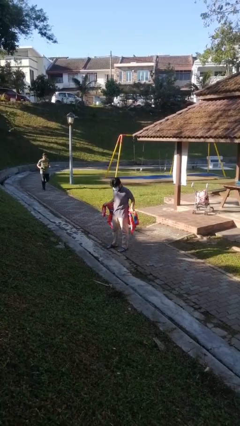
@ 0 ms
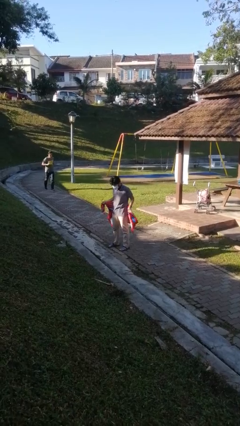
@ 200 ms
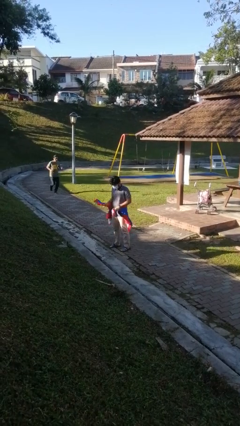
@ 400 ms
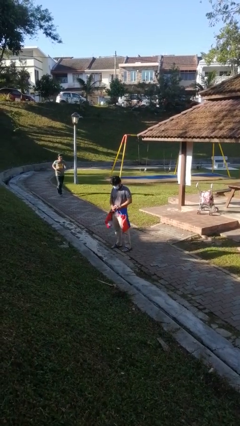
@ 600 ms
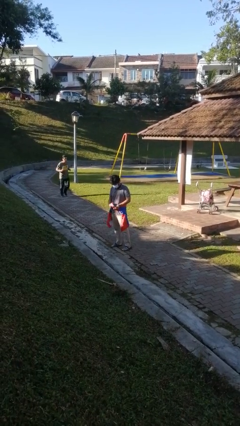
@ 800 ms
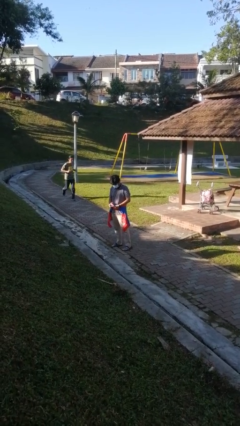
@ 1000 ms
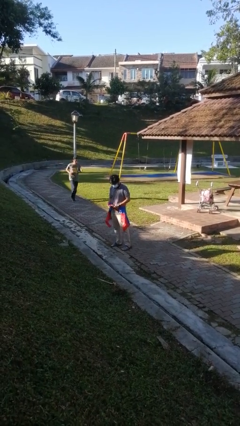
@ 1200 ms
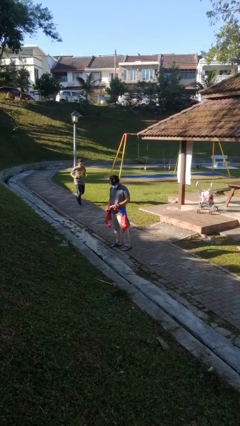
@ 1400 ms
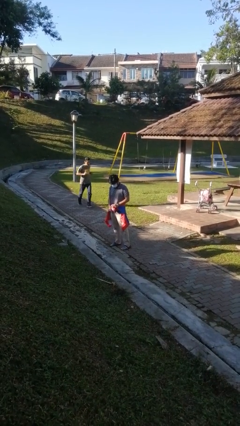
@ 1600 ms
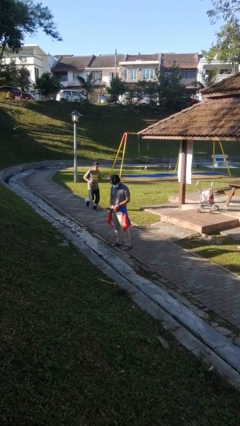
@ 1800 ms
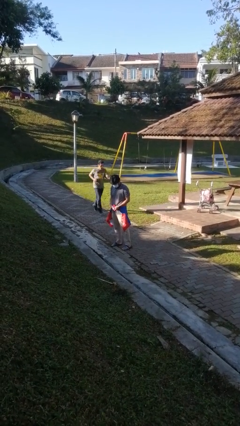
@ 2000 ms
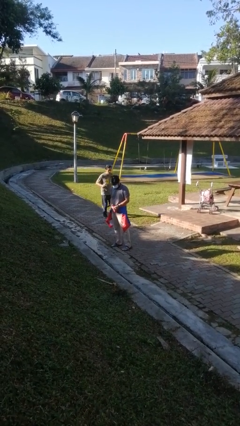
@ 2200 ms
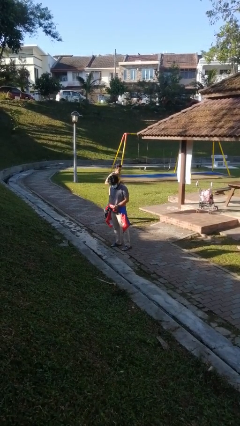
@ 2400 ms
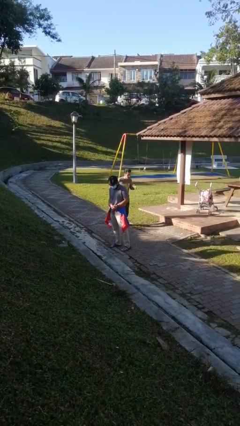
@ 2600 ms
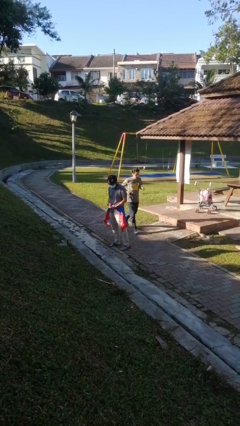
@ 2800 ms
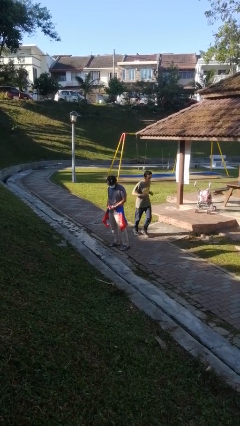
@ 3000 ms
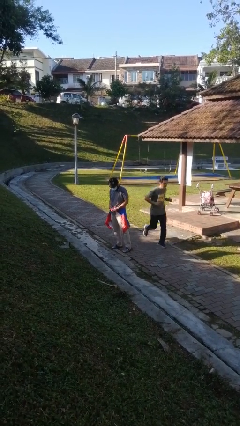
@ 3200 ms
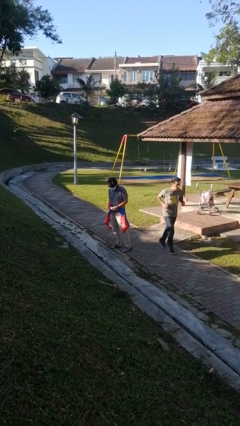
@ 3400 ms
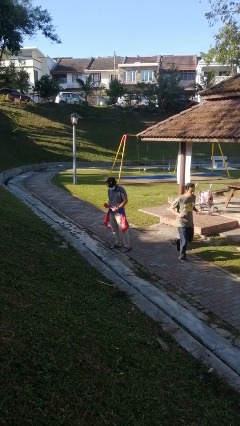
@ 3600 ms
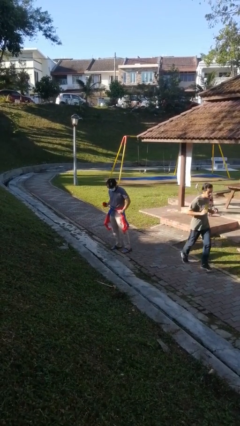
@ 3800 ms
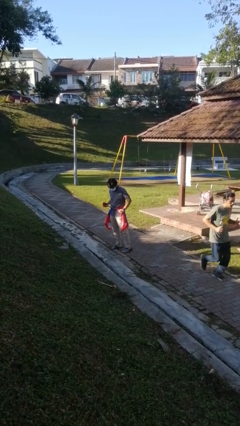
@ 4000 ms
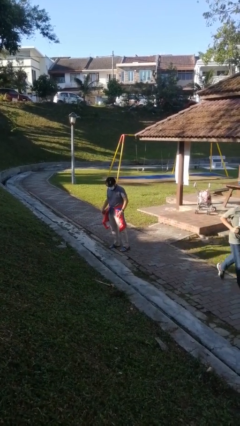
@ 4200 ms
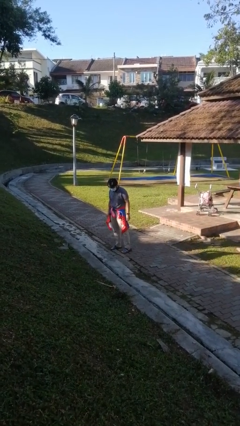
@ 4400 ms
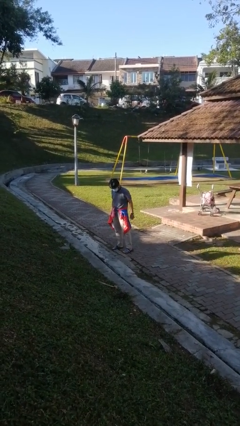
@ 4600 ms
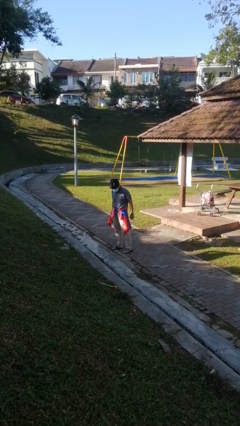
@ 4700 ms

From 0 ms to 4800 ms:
person ties jacket around waist

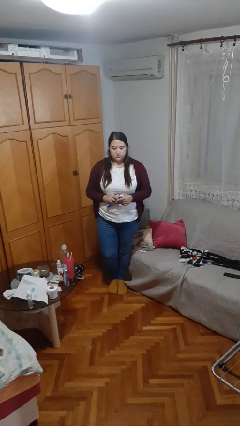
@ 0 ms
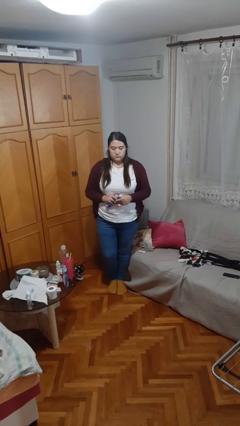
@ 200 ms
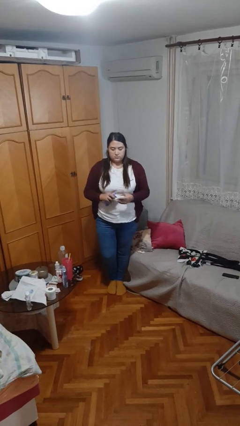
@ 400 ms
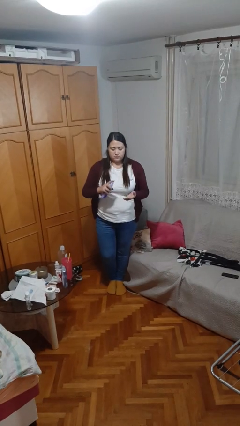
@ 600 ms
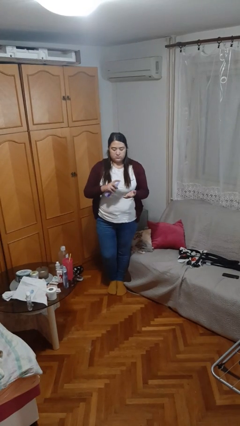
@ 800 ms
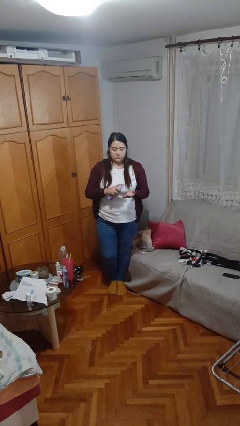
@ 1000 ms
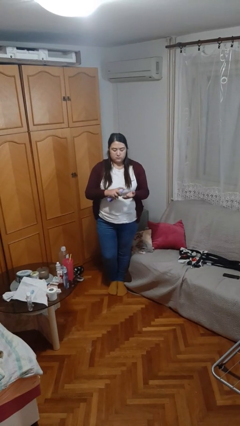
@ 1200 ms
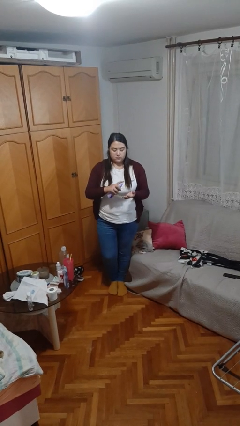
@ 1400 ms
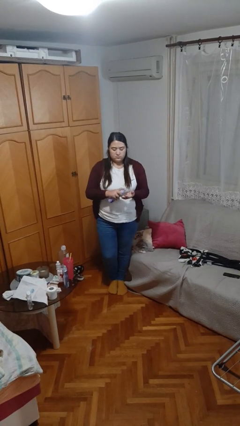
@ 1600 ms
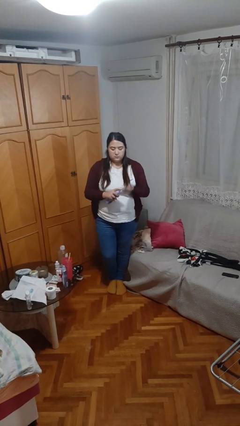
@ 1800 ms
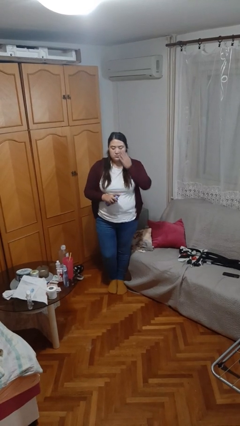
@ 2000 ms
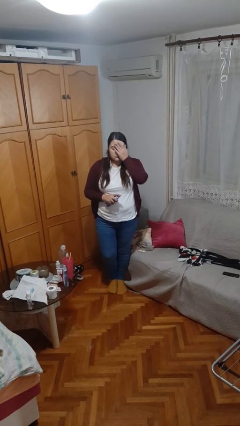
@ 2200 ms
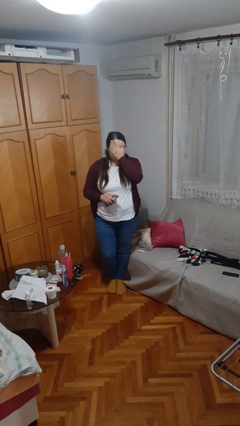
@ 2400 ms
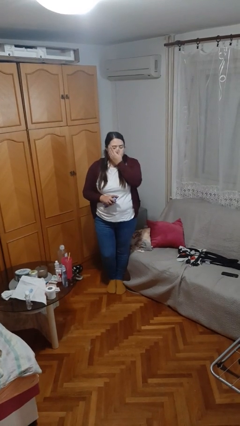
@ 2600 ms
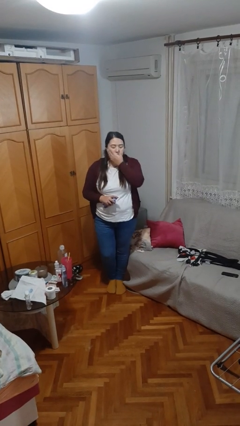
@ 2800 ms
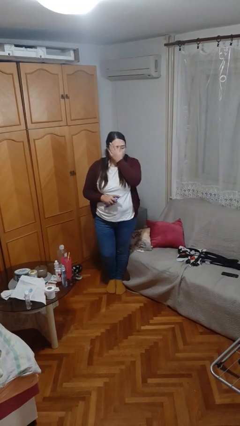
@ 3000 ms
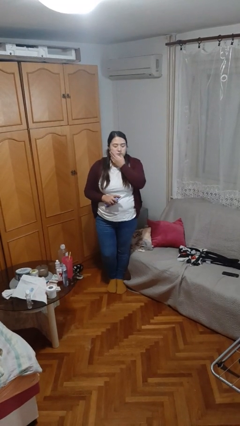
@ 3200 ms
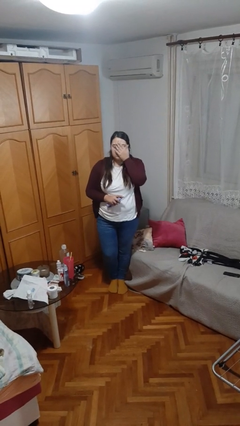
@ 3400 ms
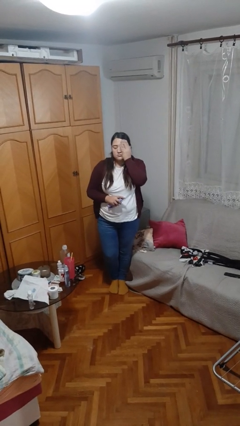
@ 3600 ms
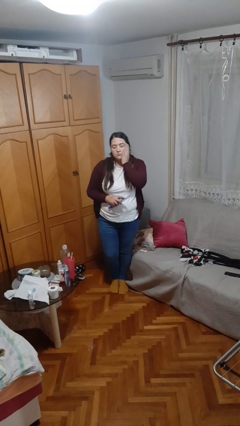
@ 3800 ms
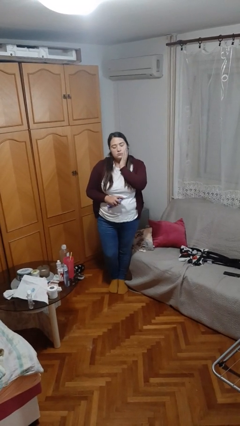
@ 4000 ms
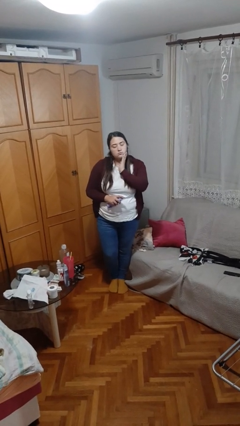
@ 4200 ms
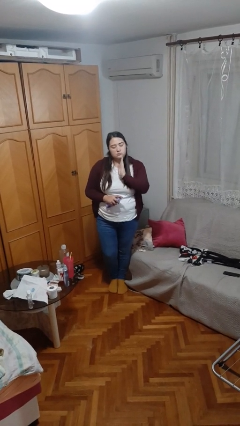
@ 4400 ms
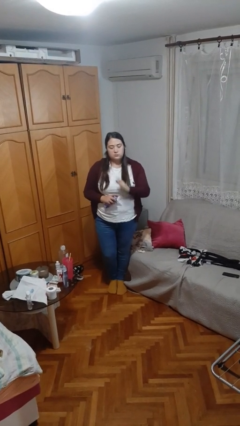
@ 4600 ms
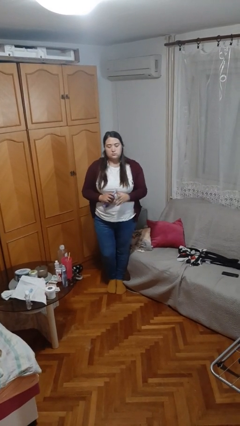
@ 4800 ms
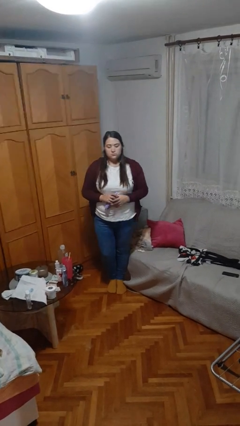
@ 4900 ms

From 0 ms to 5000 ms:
person applies facial moisturizer

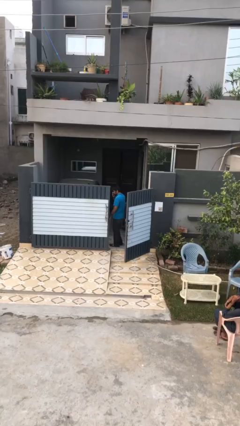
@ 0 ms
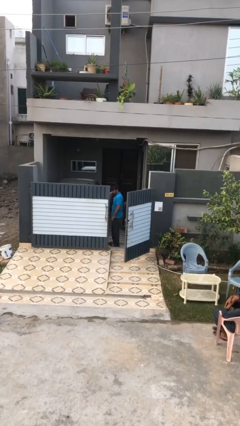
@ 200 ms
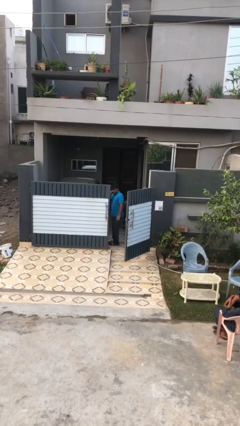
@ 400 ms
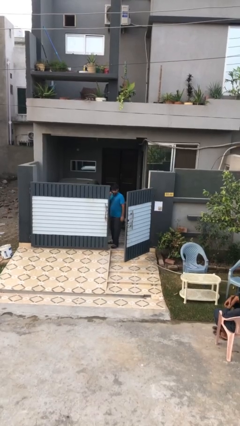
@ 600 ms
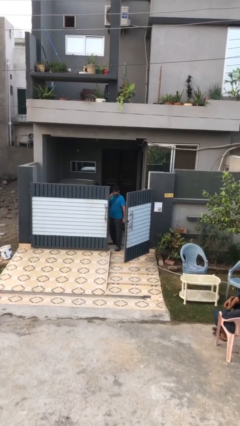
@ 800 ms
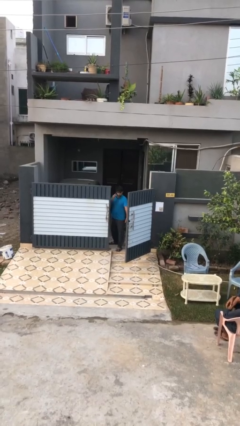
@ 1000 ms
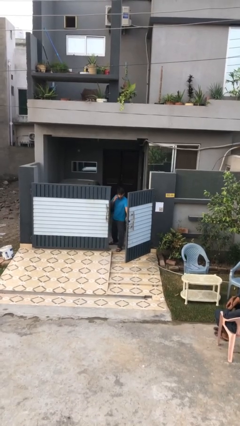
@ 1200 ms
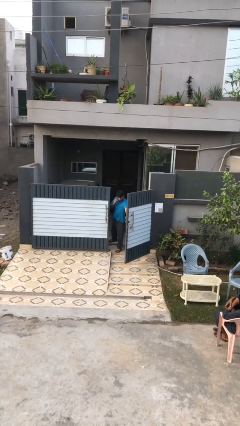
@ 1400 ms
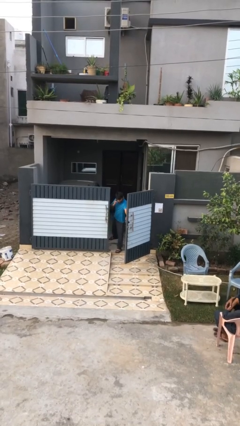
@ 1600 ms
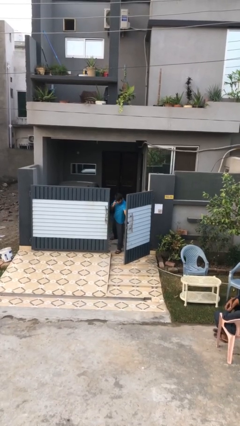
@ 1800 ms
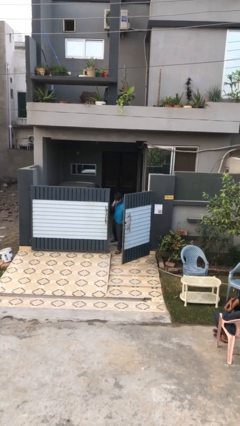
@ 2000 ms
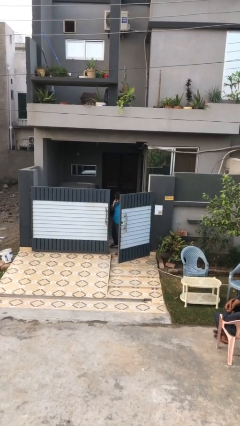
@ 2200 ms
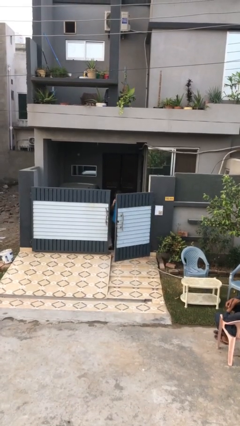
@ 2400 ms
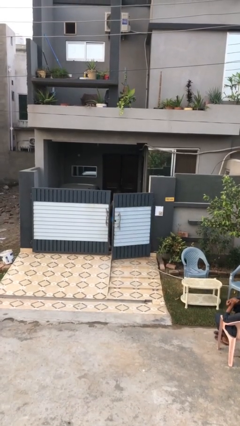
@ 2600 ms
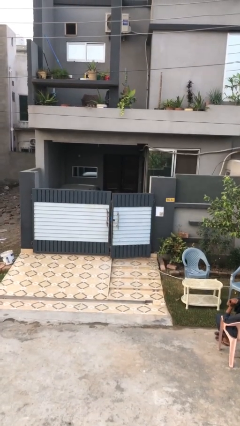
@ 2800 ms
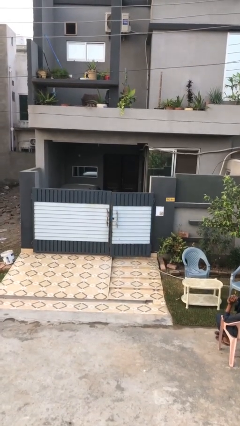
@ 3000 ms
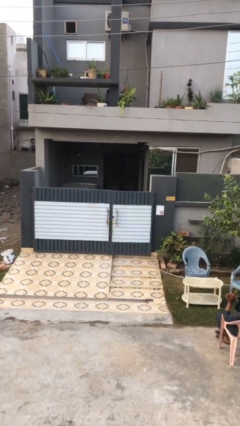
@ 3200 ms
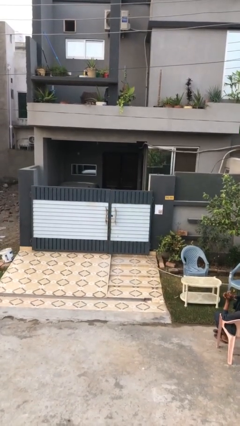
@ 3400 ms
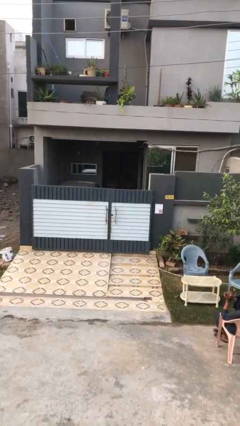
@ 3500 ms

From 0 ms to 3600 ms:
person closes facility door

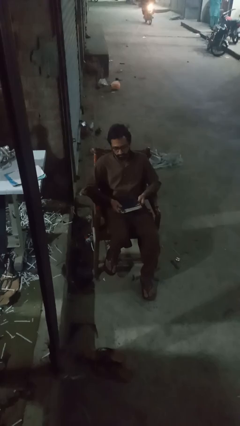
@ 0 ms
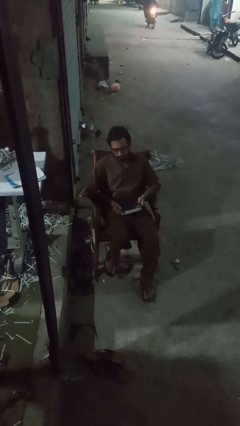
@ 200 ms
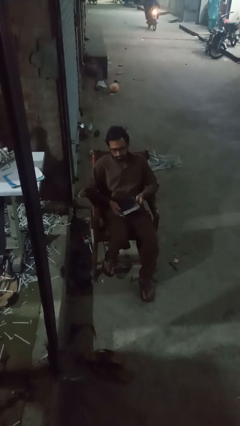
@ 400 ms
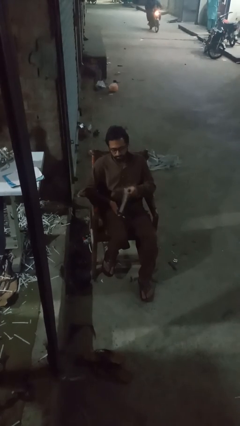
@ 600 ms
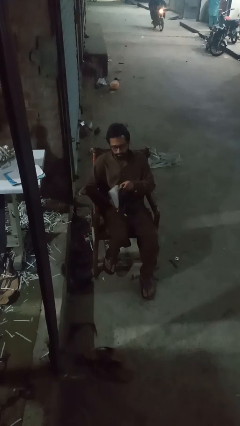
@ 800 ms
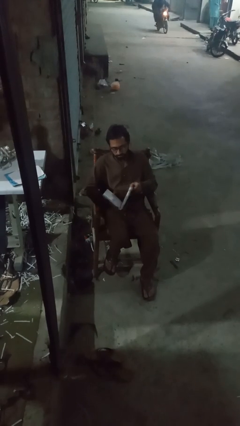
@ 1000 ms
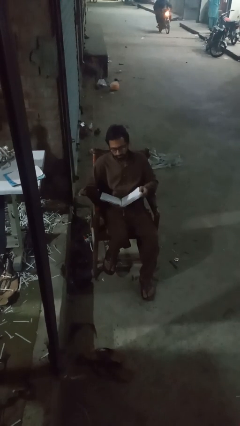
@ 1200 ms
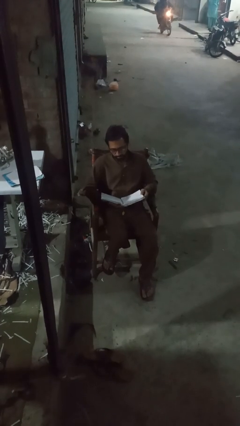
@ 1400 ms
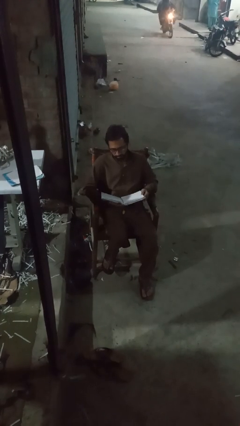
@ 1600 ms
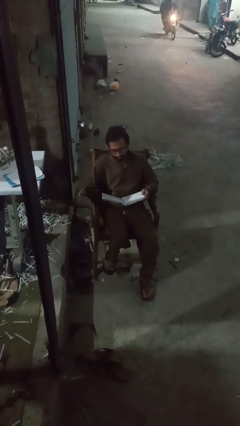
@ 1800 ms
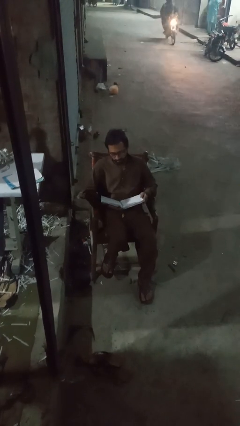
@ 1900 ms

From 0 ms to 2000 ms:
person reads book

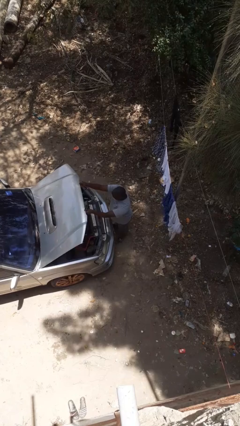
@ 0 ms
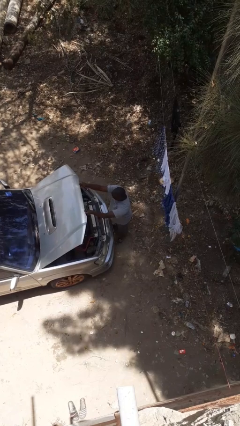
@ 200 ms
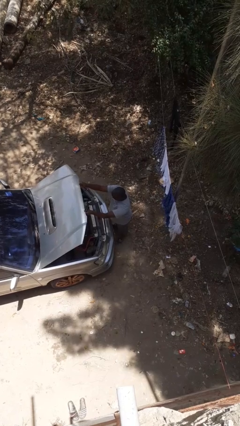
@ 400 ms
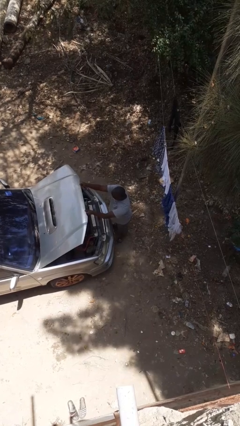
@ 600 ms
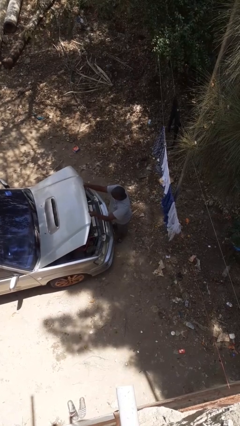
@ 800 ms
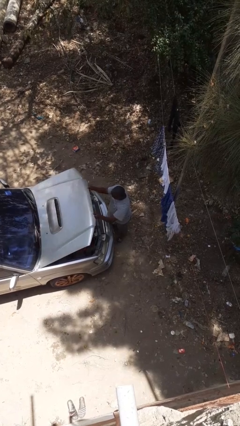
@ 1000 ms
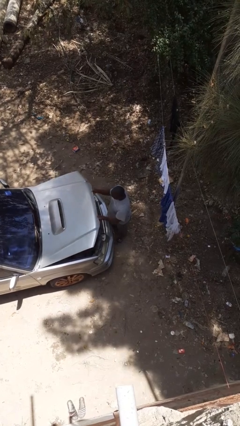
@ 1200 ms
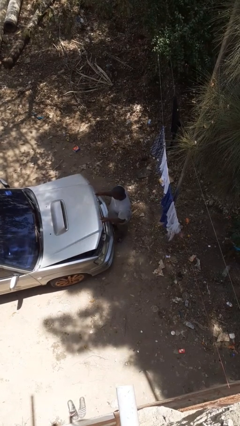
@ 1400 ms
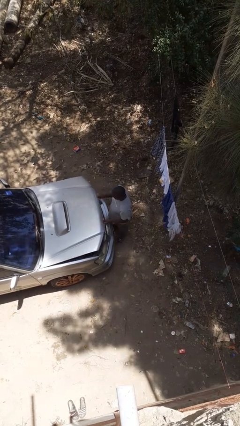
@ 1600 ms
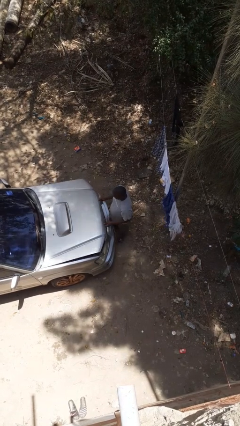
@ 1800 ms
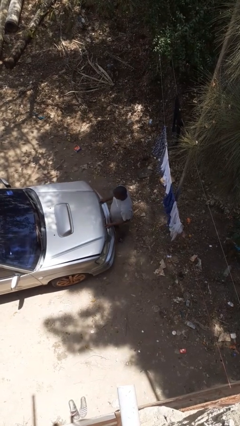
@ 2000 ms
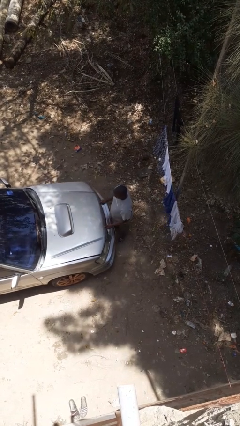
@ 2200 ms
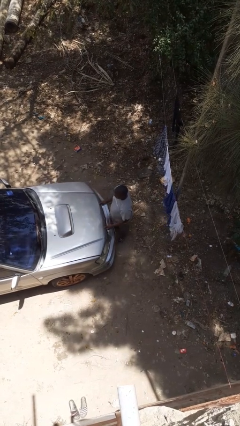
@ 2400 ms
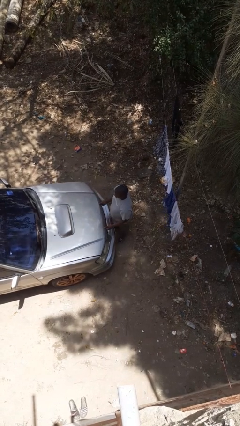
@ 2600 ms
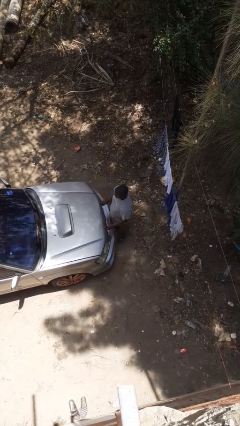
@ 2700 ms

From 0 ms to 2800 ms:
person closes car hood
